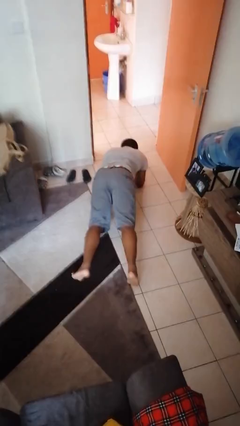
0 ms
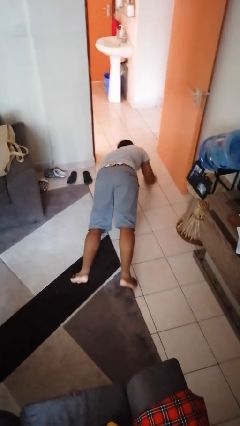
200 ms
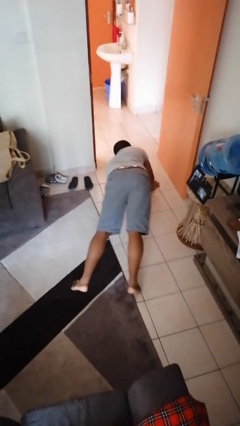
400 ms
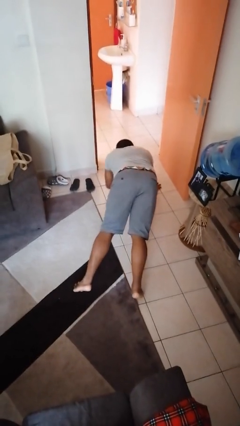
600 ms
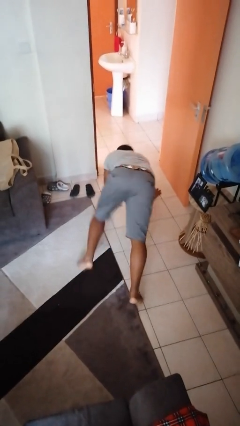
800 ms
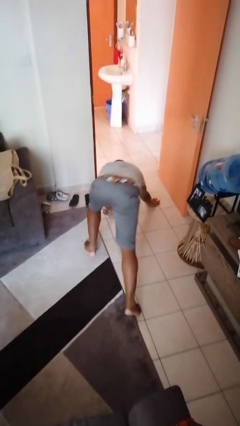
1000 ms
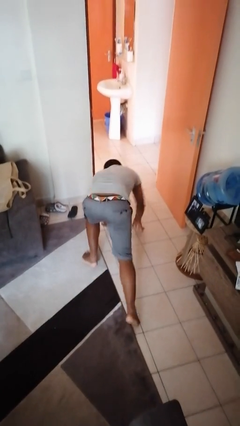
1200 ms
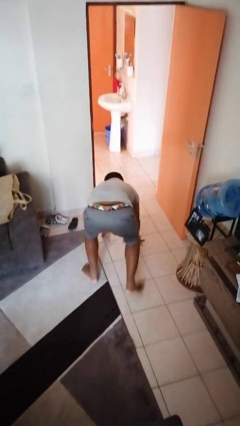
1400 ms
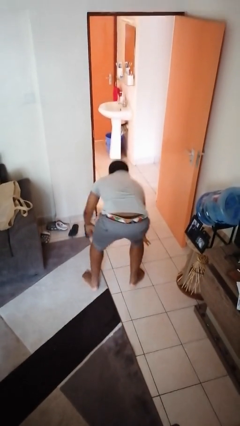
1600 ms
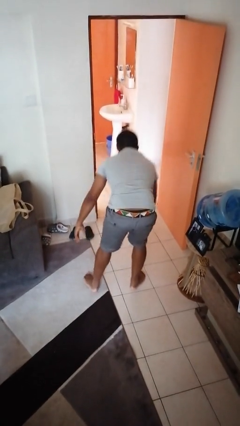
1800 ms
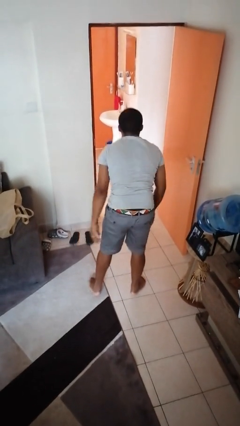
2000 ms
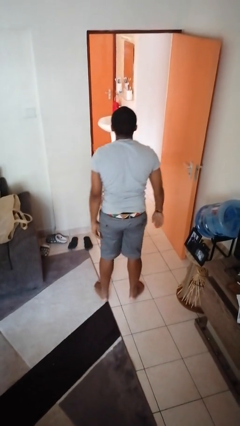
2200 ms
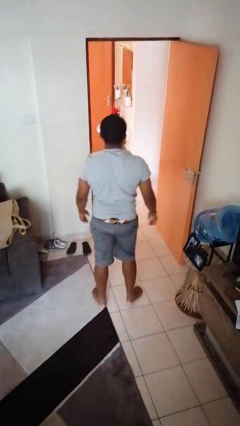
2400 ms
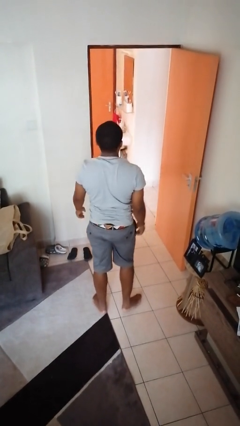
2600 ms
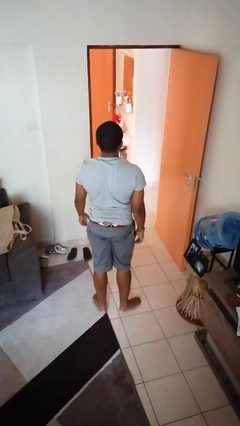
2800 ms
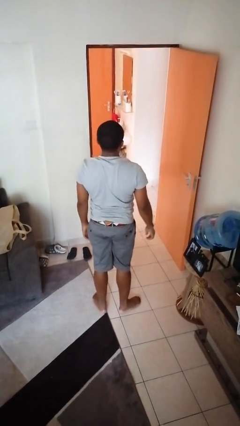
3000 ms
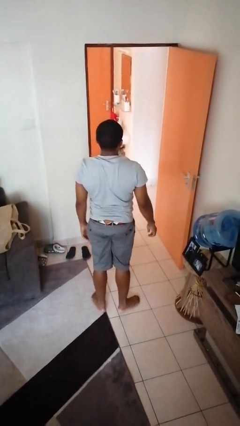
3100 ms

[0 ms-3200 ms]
person stands up from floor

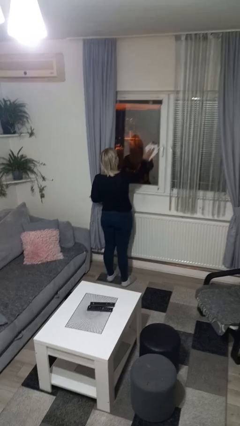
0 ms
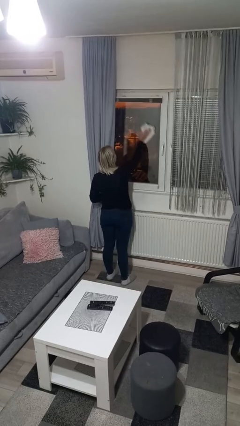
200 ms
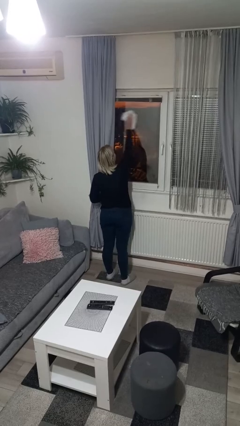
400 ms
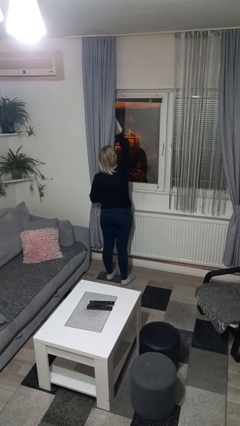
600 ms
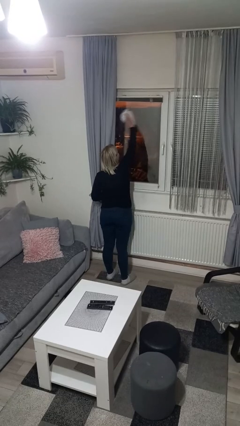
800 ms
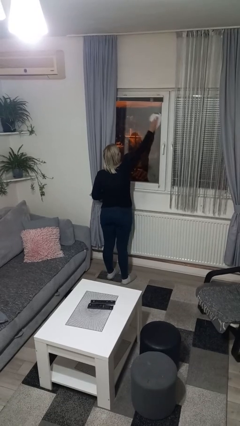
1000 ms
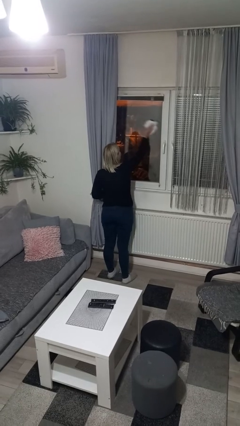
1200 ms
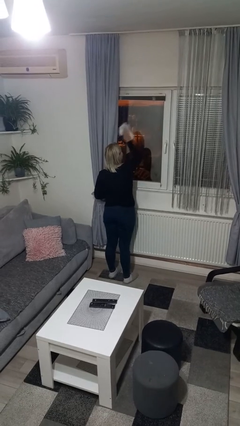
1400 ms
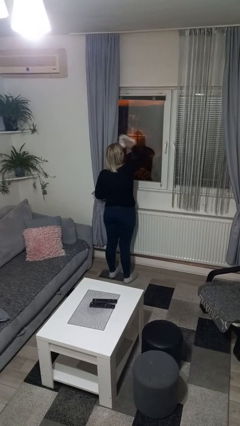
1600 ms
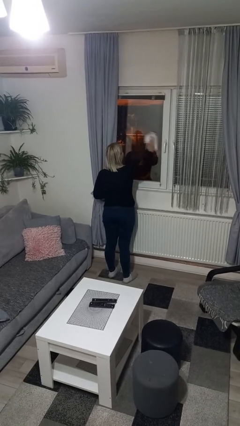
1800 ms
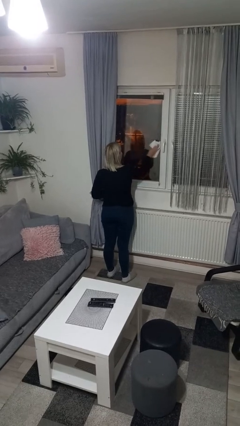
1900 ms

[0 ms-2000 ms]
person washes window

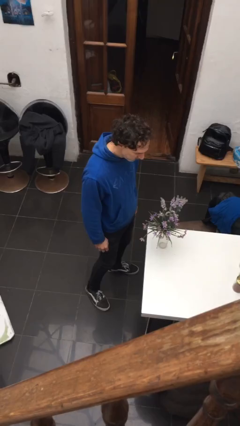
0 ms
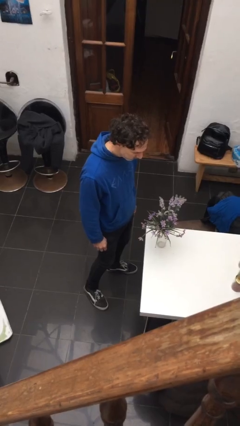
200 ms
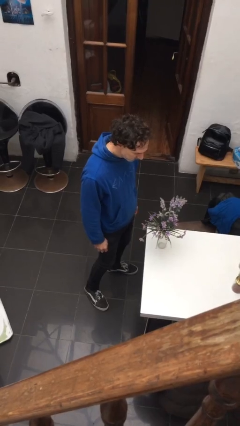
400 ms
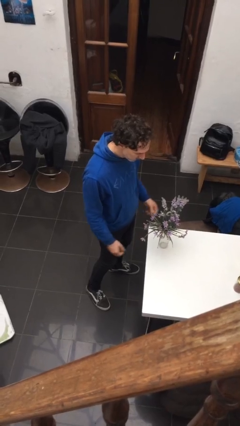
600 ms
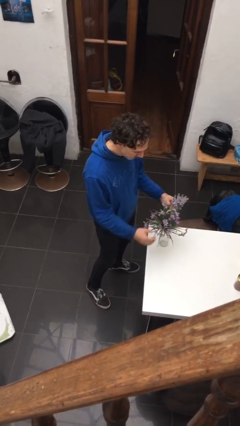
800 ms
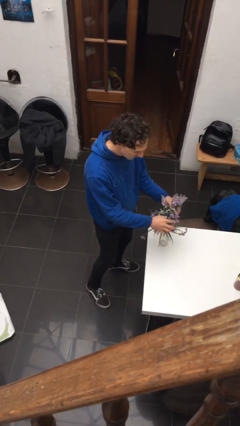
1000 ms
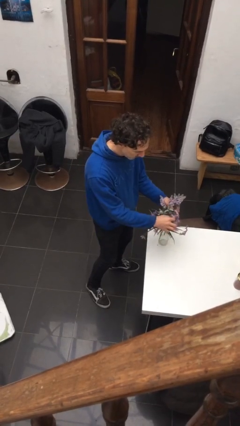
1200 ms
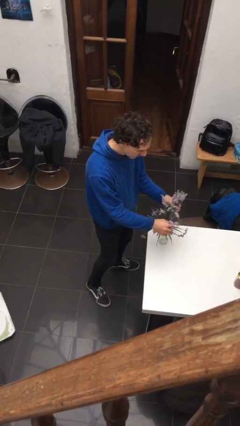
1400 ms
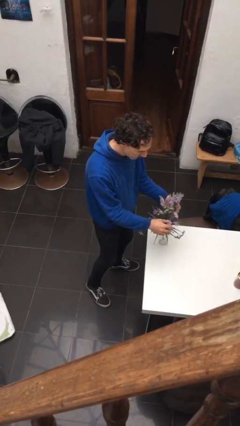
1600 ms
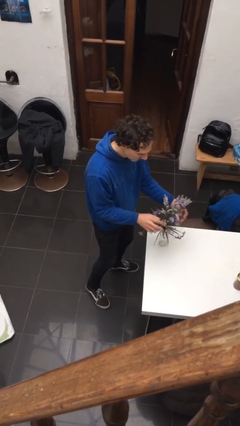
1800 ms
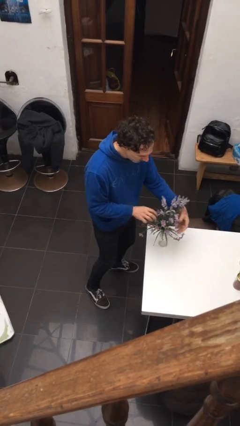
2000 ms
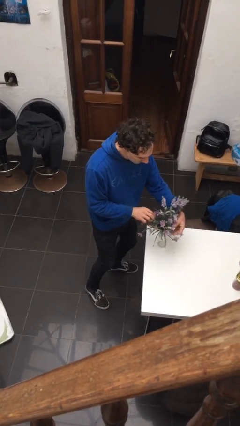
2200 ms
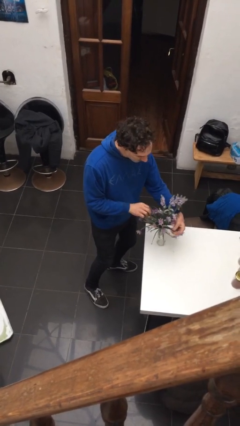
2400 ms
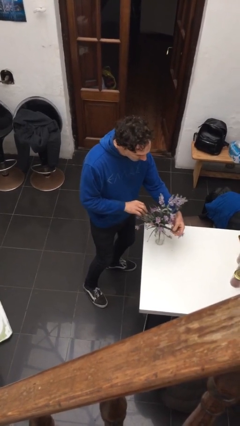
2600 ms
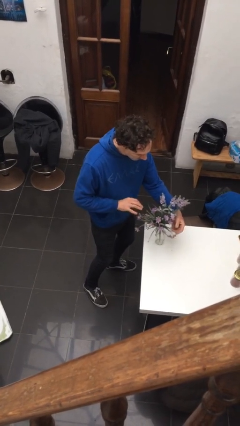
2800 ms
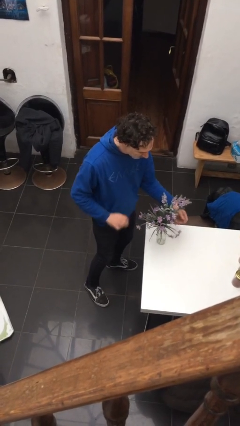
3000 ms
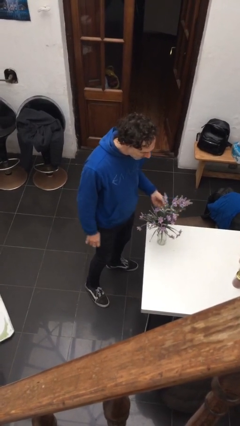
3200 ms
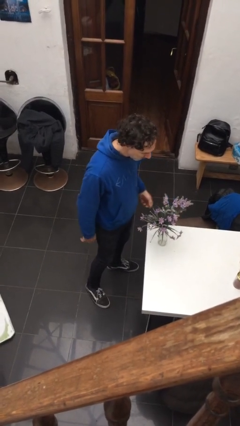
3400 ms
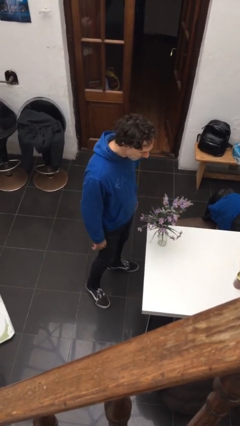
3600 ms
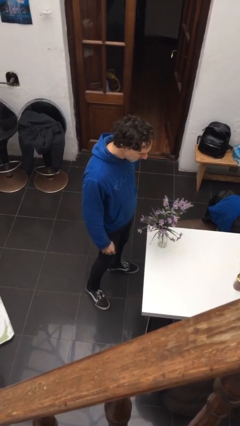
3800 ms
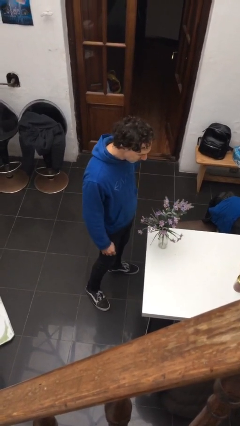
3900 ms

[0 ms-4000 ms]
person arranges flowers in vase

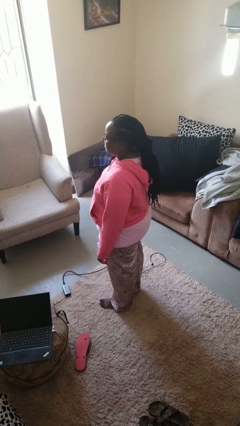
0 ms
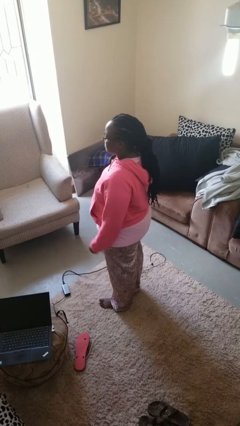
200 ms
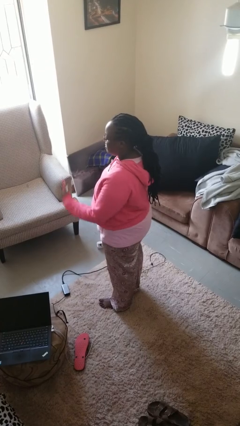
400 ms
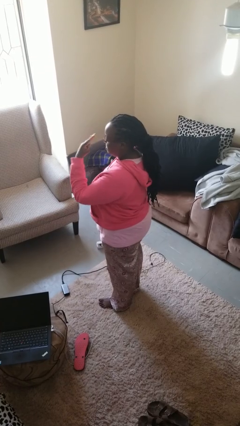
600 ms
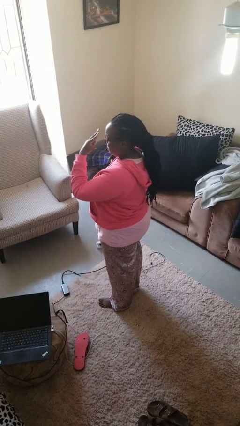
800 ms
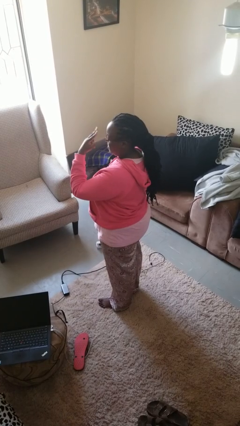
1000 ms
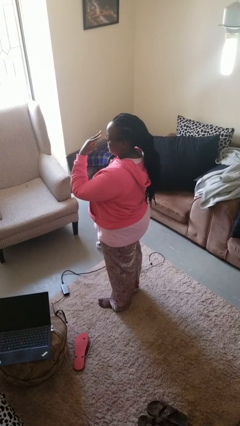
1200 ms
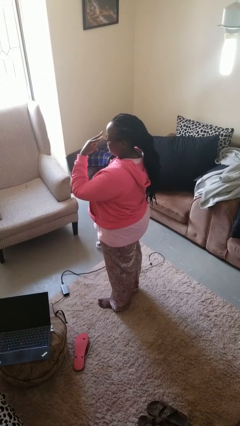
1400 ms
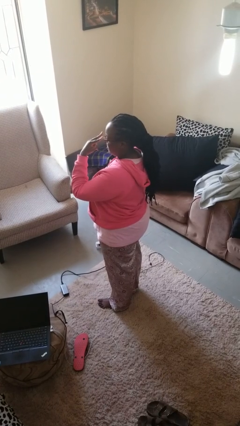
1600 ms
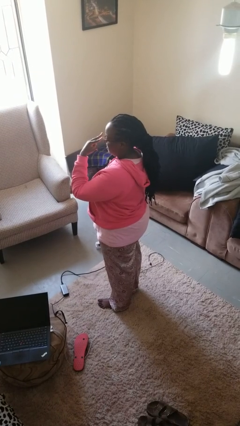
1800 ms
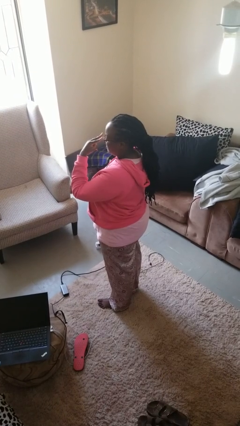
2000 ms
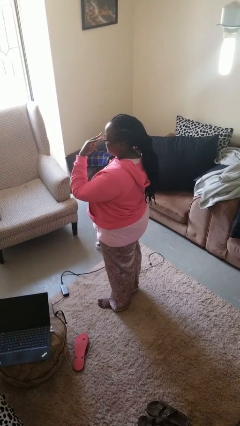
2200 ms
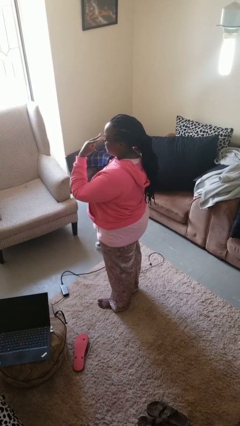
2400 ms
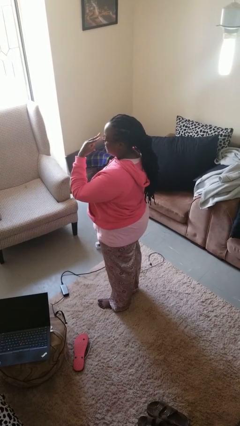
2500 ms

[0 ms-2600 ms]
person gestures watch closely

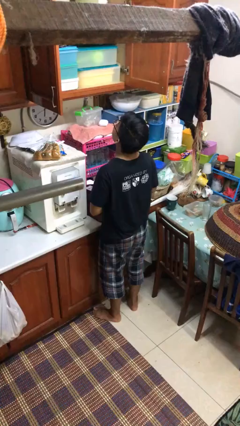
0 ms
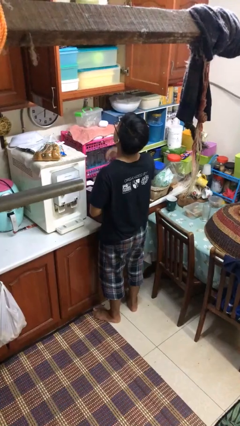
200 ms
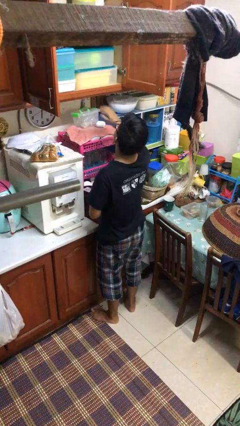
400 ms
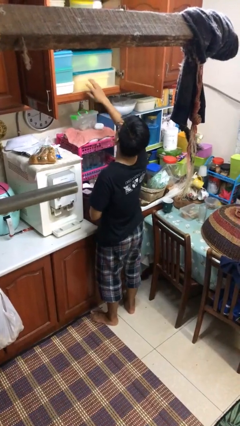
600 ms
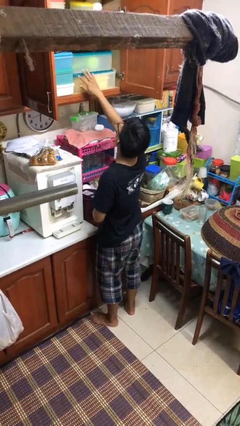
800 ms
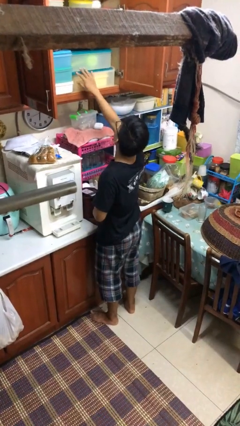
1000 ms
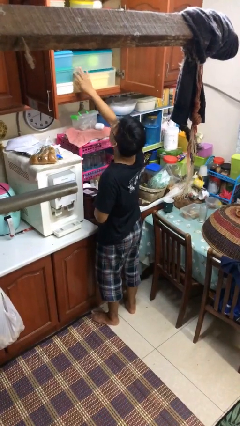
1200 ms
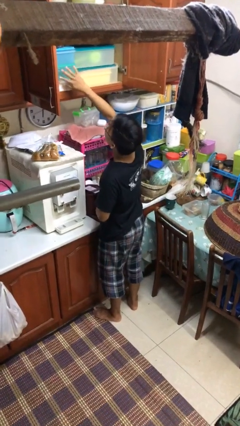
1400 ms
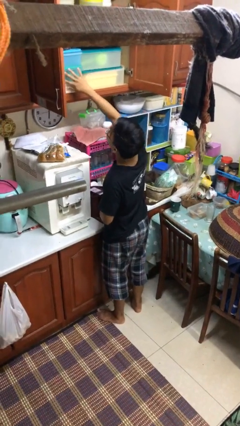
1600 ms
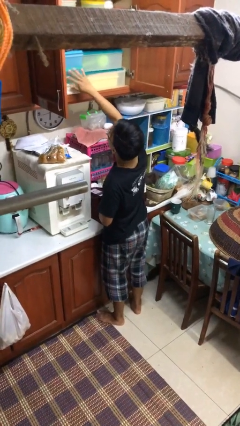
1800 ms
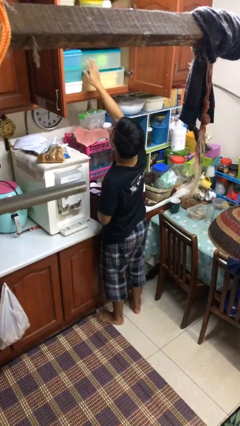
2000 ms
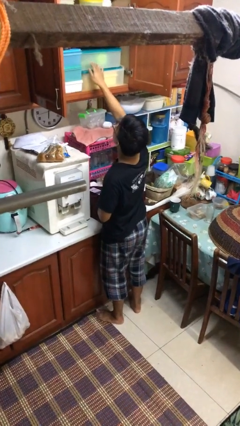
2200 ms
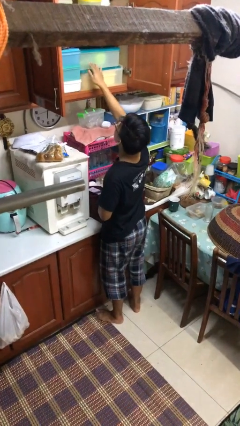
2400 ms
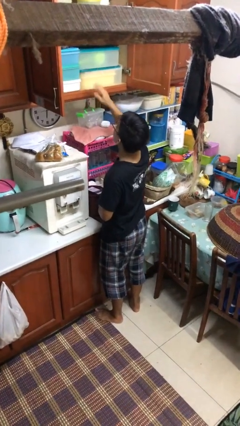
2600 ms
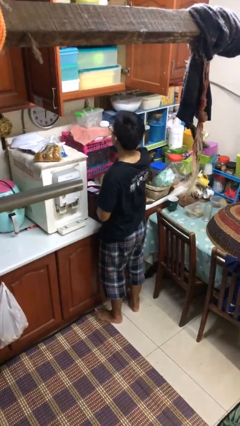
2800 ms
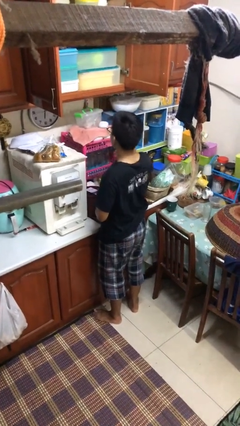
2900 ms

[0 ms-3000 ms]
person searches in kitchen drawer

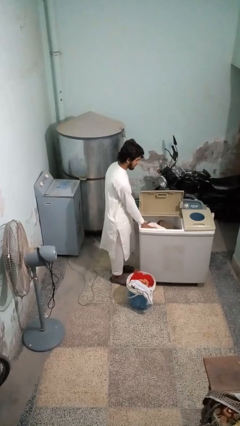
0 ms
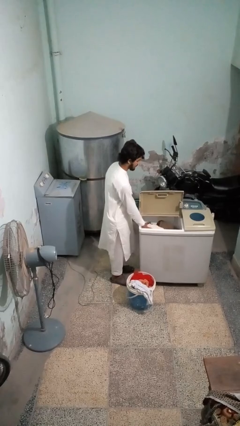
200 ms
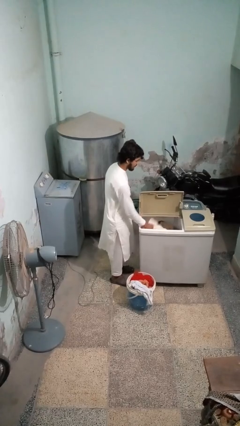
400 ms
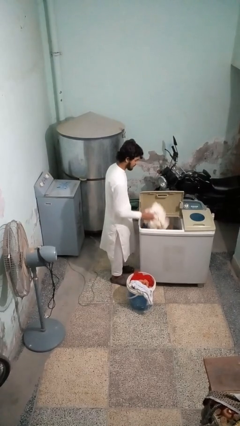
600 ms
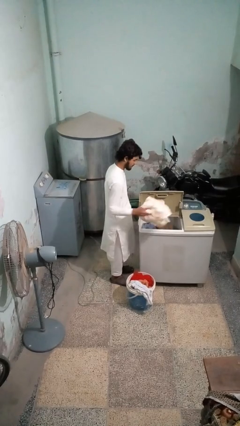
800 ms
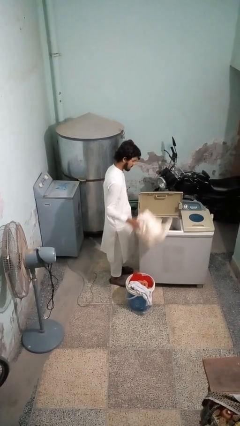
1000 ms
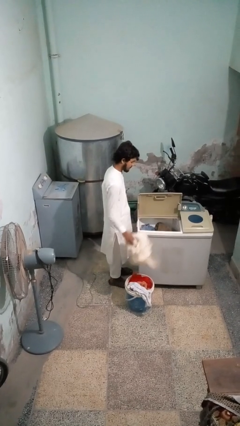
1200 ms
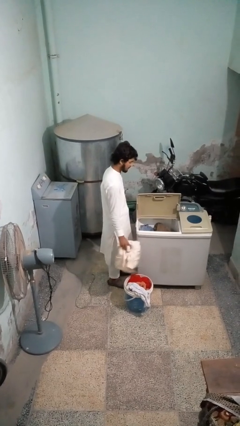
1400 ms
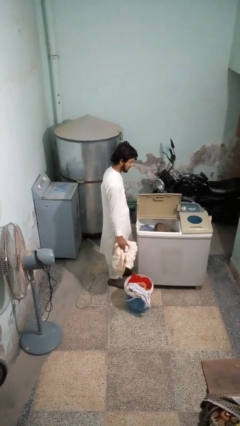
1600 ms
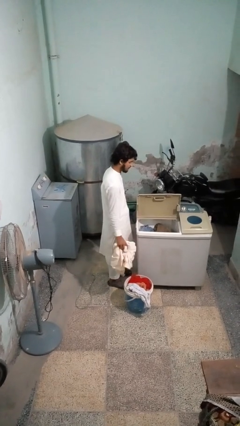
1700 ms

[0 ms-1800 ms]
person unloads clotheswasher

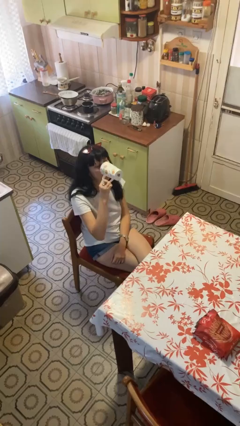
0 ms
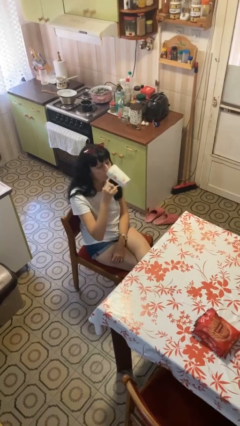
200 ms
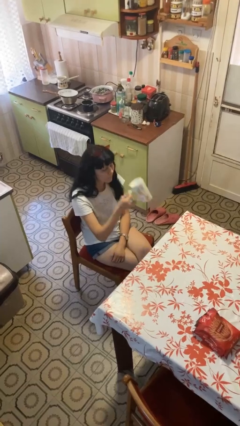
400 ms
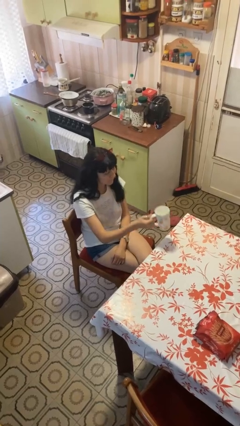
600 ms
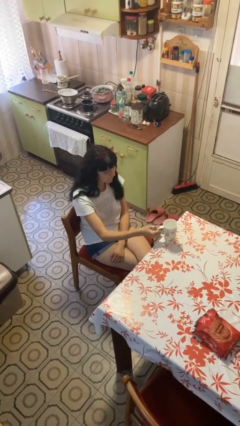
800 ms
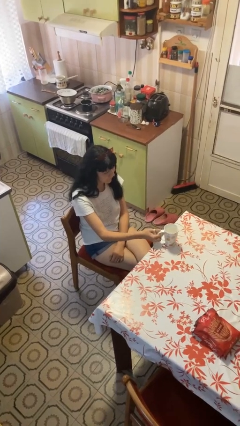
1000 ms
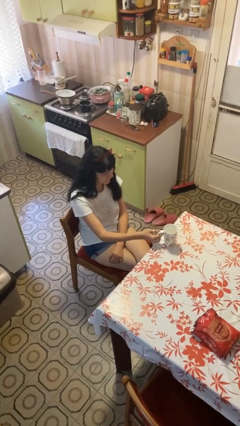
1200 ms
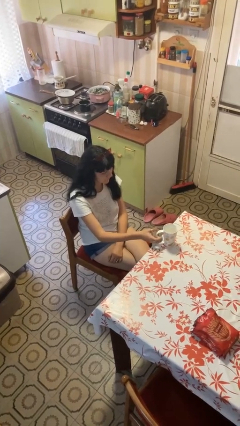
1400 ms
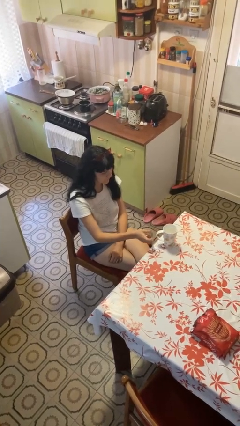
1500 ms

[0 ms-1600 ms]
person puts down object on table
